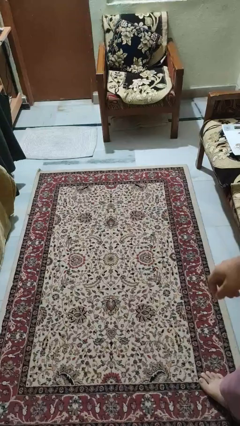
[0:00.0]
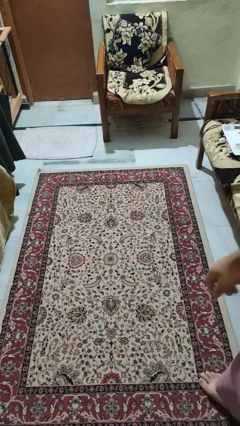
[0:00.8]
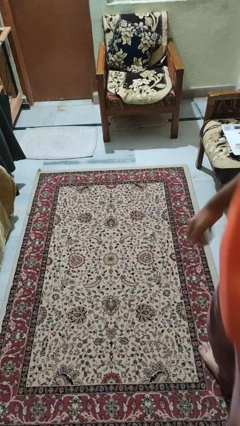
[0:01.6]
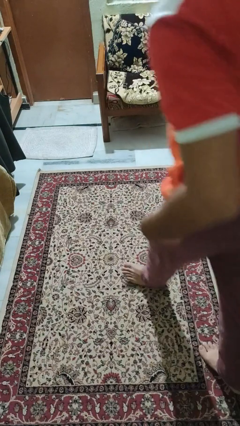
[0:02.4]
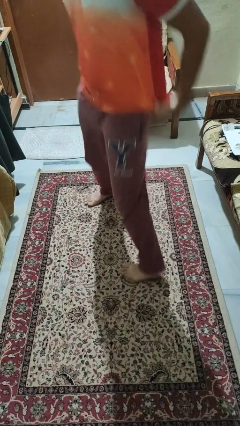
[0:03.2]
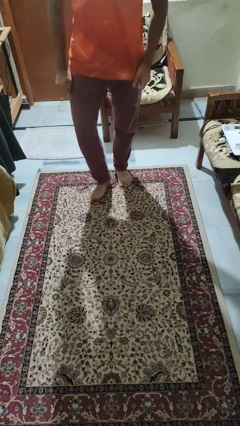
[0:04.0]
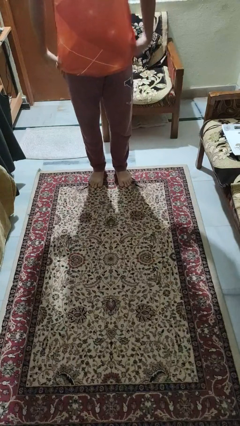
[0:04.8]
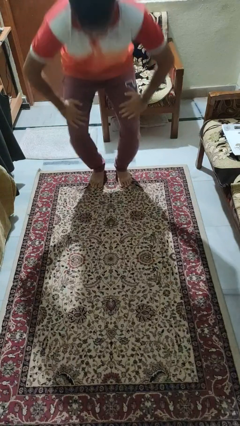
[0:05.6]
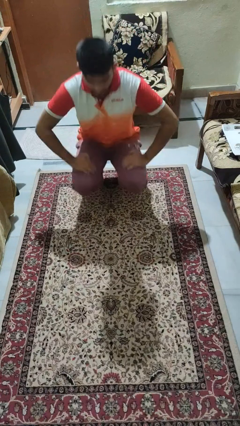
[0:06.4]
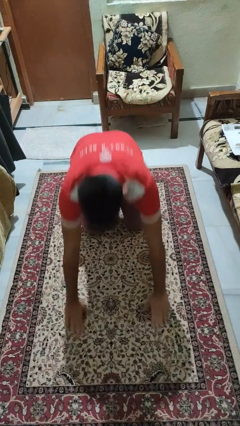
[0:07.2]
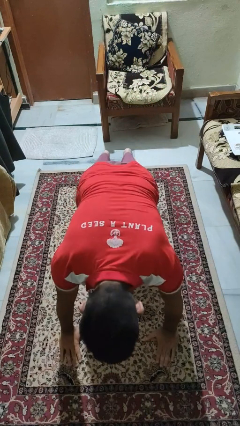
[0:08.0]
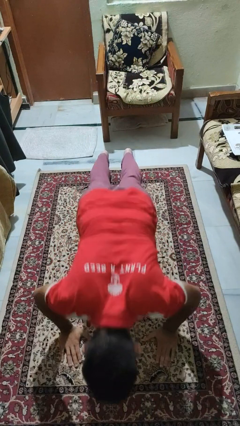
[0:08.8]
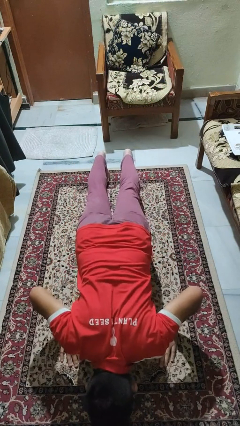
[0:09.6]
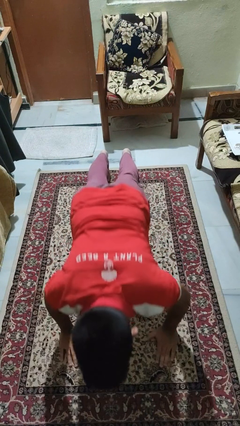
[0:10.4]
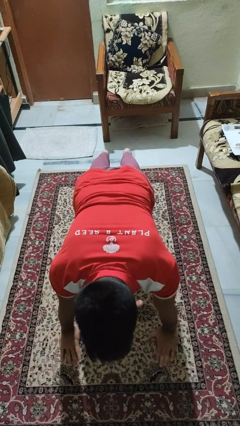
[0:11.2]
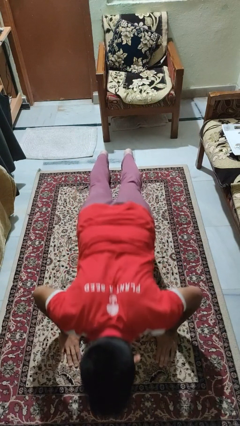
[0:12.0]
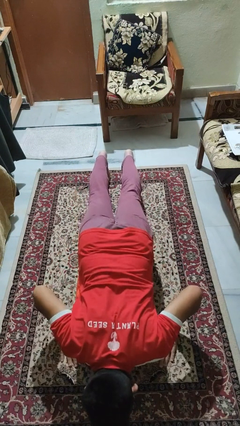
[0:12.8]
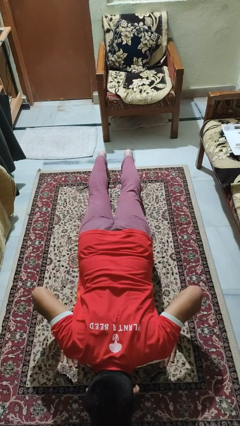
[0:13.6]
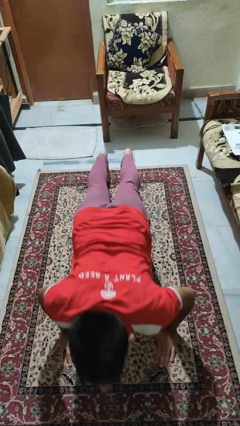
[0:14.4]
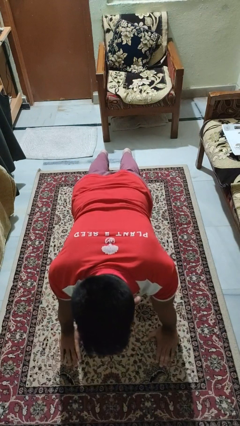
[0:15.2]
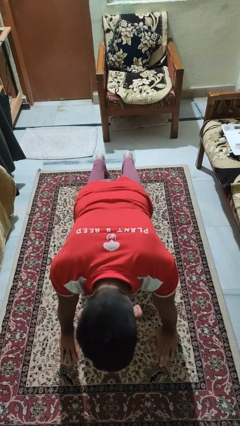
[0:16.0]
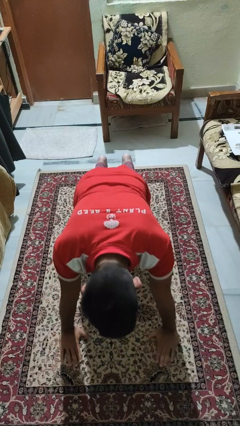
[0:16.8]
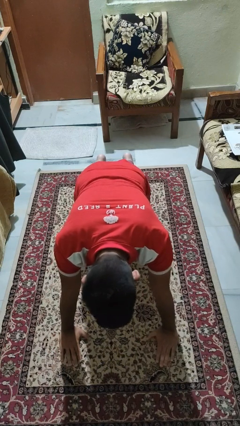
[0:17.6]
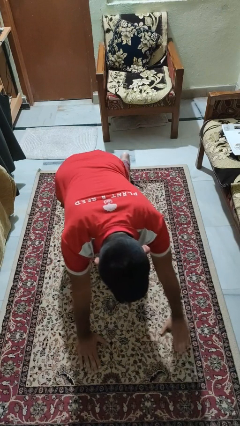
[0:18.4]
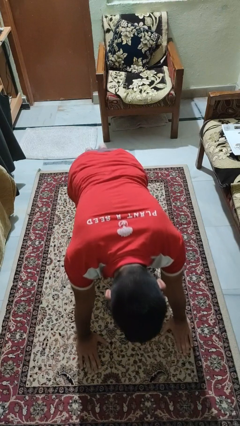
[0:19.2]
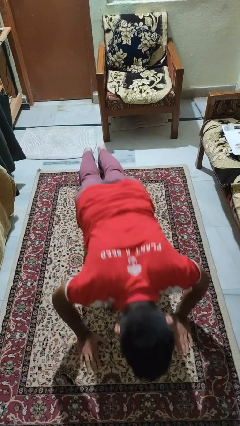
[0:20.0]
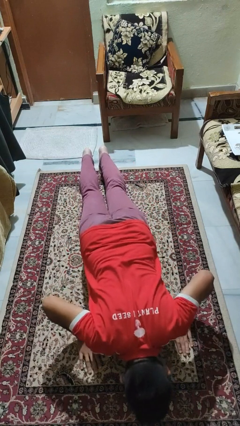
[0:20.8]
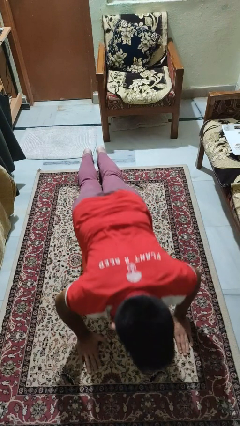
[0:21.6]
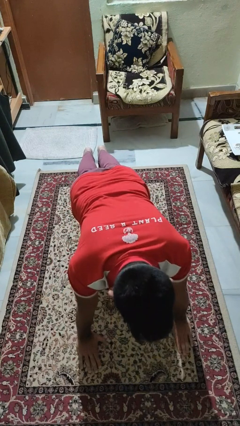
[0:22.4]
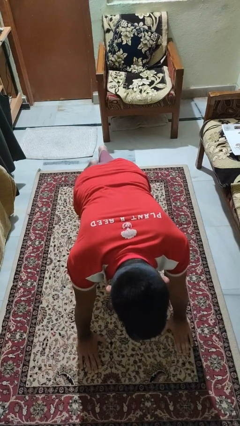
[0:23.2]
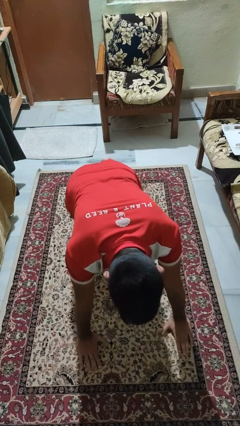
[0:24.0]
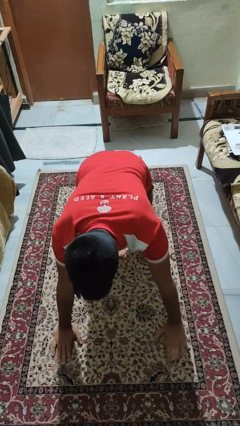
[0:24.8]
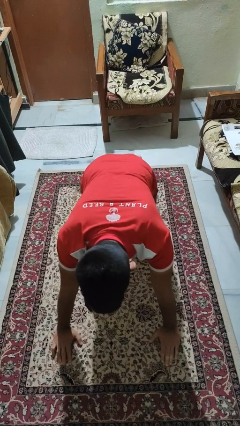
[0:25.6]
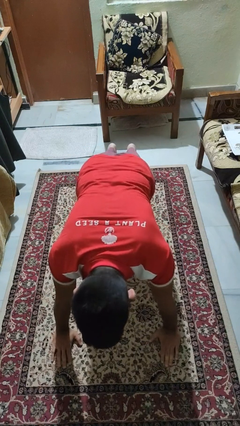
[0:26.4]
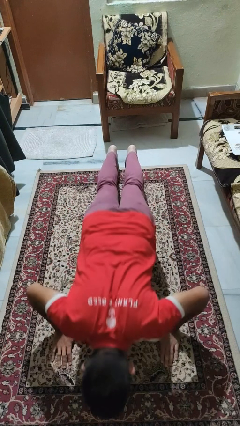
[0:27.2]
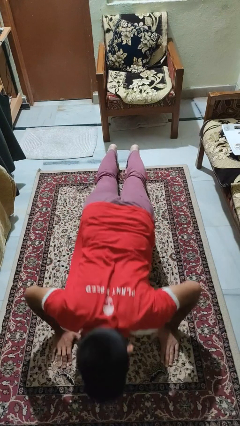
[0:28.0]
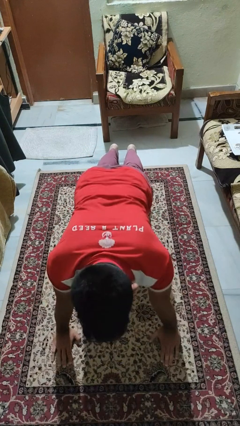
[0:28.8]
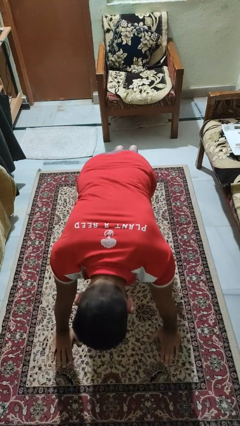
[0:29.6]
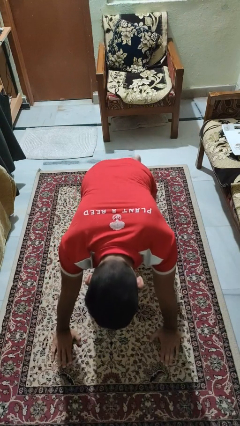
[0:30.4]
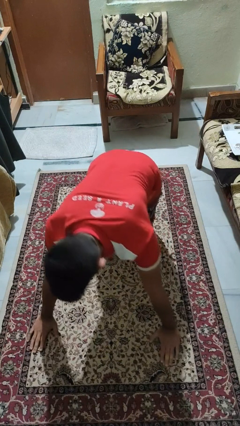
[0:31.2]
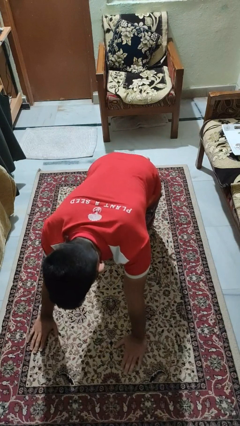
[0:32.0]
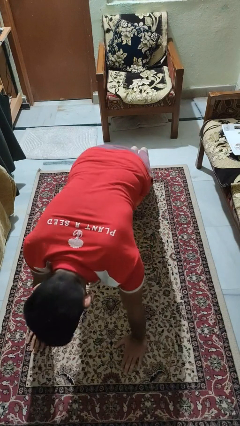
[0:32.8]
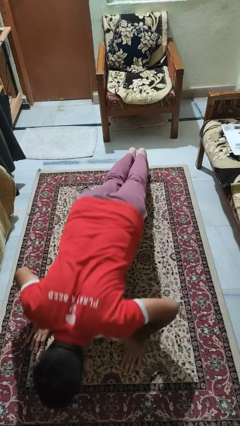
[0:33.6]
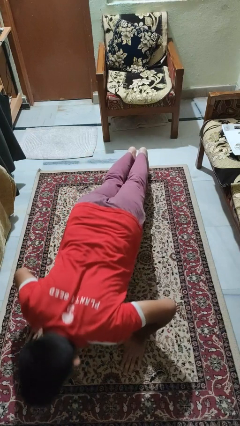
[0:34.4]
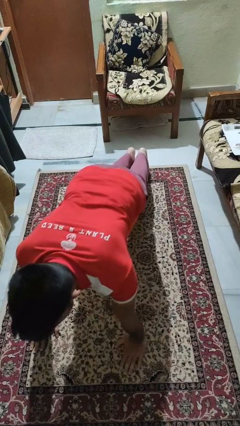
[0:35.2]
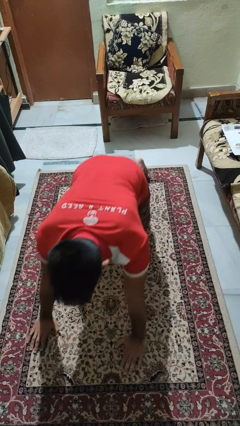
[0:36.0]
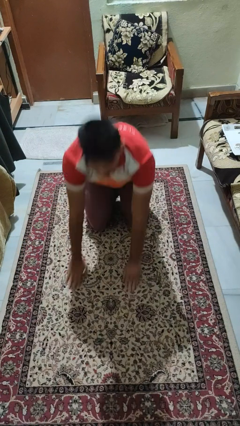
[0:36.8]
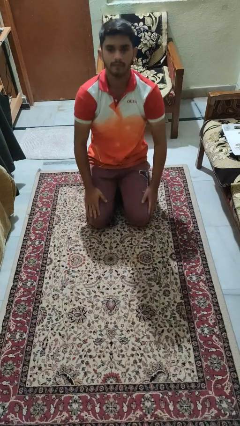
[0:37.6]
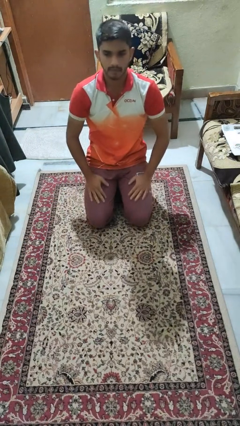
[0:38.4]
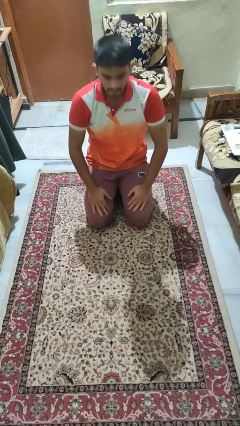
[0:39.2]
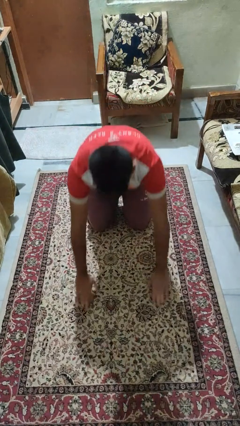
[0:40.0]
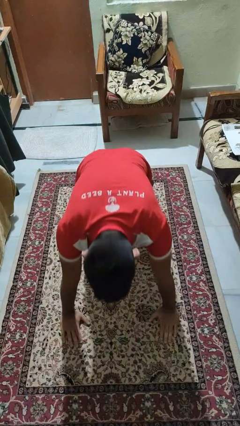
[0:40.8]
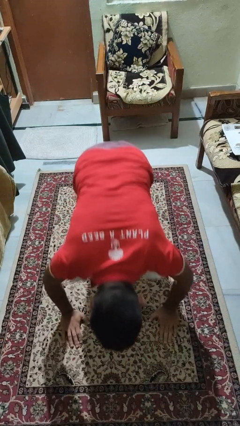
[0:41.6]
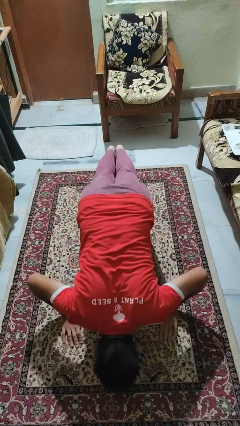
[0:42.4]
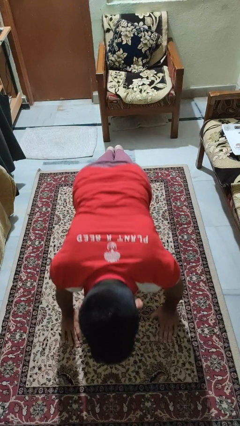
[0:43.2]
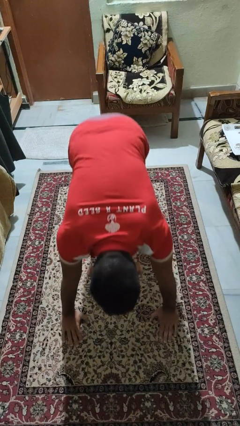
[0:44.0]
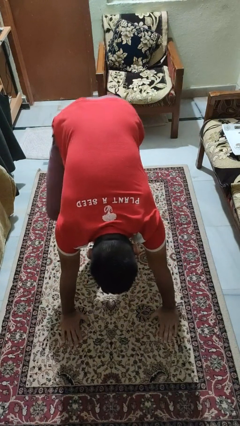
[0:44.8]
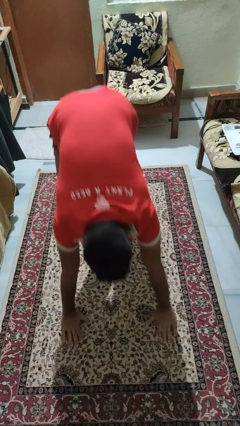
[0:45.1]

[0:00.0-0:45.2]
person exercises with pushup

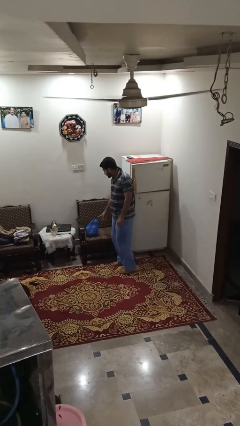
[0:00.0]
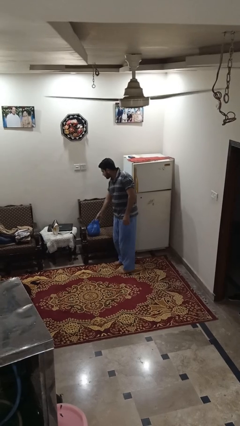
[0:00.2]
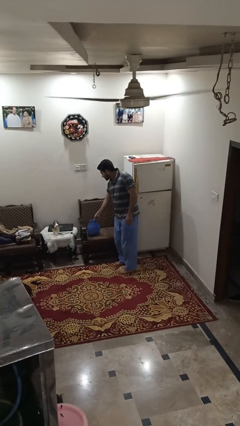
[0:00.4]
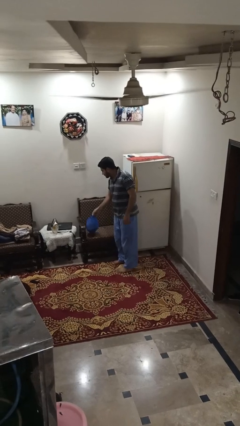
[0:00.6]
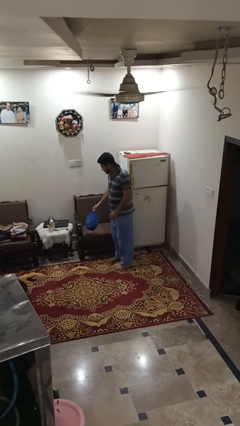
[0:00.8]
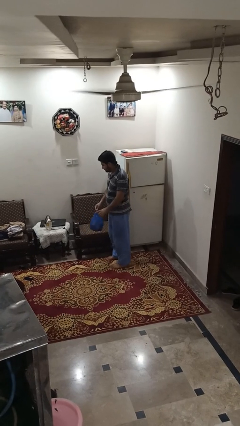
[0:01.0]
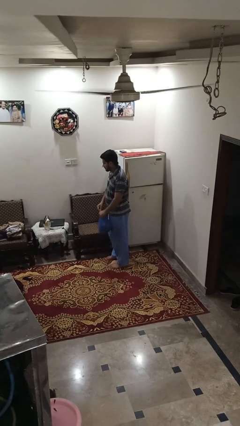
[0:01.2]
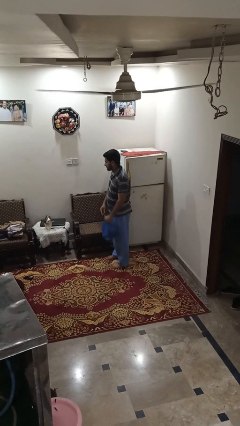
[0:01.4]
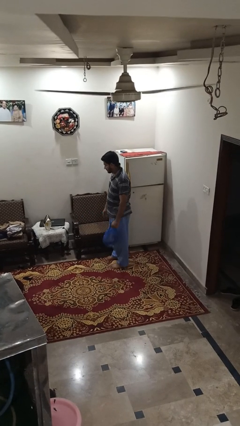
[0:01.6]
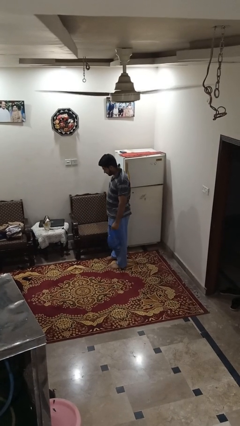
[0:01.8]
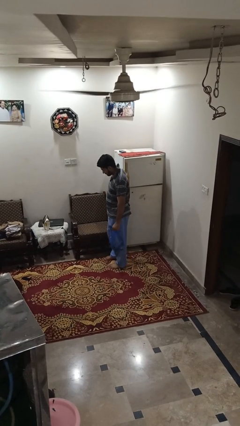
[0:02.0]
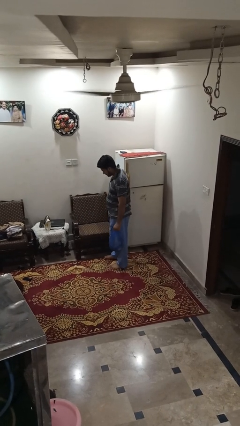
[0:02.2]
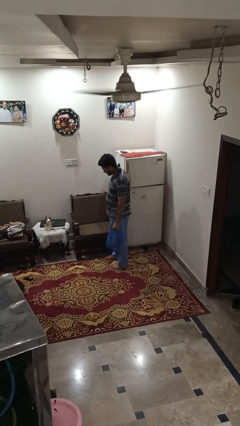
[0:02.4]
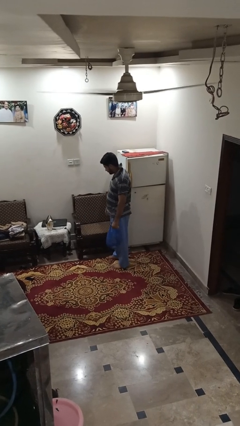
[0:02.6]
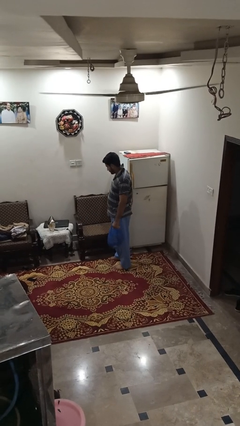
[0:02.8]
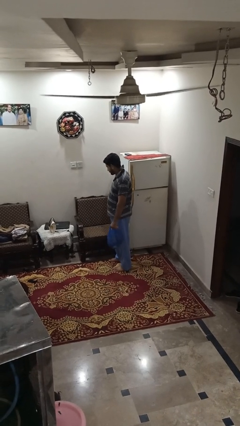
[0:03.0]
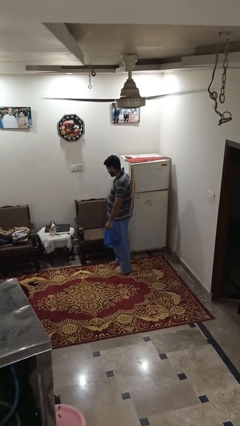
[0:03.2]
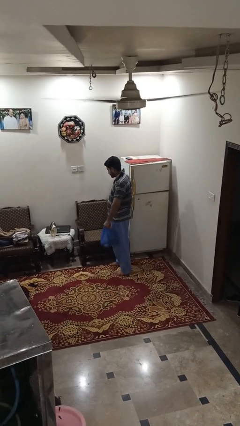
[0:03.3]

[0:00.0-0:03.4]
person picks up object from couch

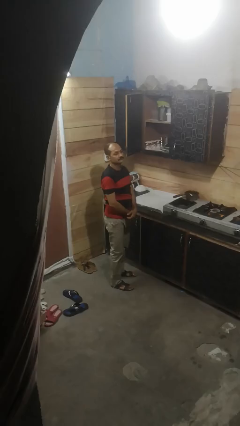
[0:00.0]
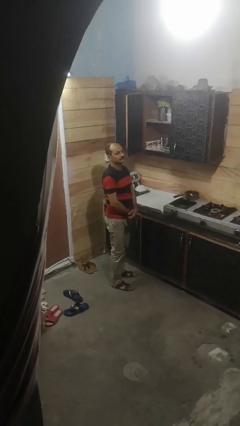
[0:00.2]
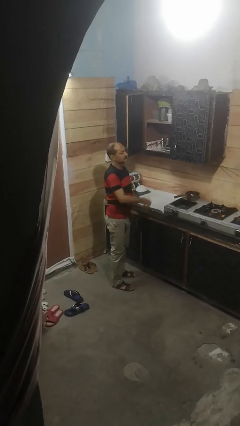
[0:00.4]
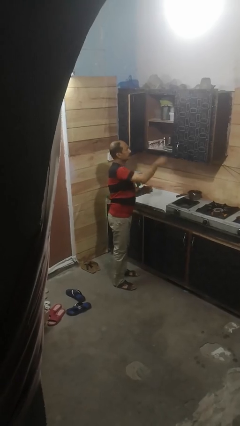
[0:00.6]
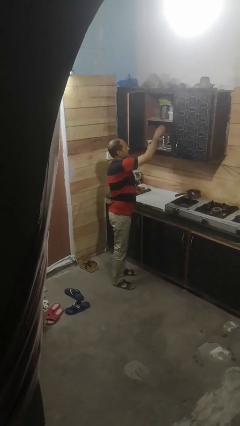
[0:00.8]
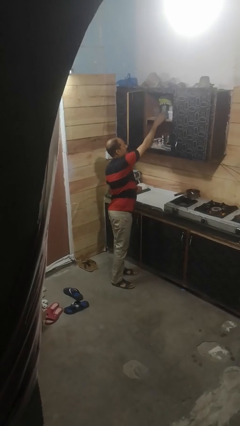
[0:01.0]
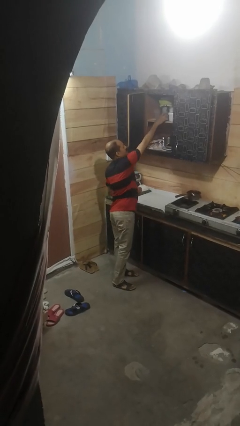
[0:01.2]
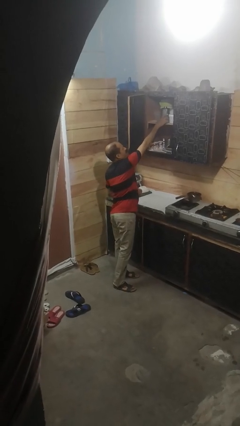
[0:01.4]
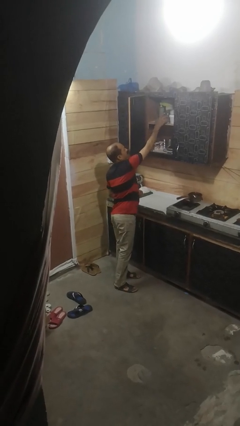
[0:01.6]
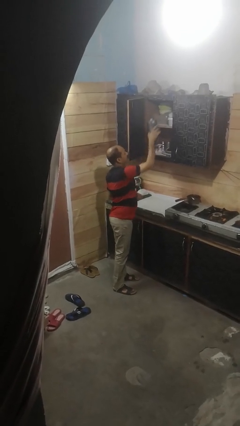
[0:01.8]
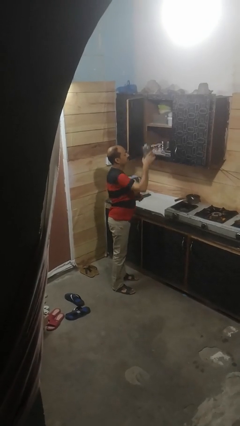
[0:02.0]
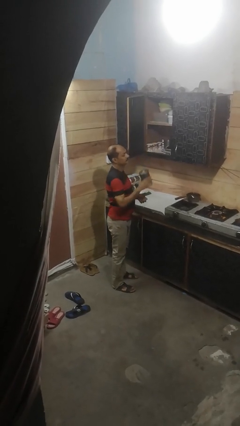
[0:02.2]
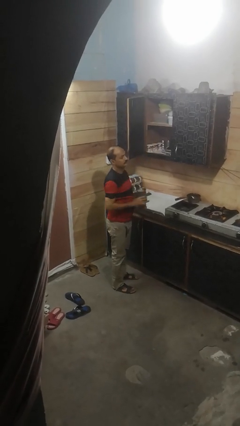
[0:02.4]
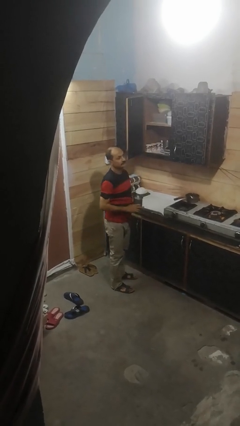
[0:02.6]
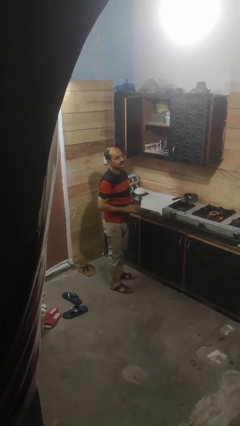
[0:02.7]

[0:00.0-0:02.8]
person picks up object from cabinet

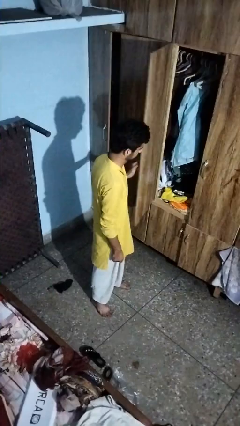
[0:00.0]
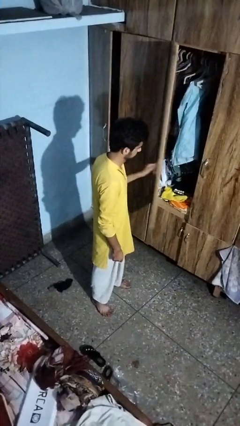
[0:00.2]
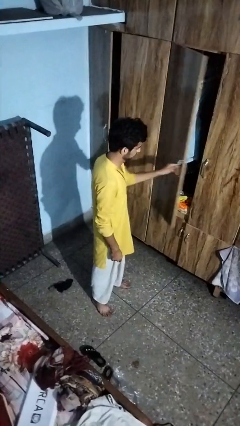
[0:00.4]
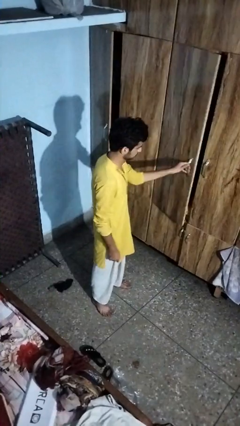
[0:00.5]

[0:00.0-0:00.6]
person closes closet door
